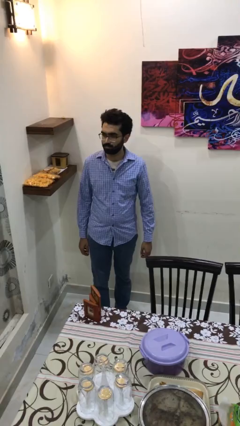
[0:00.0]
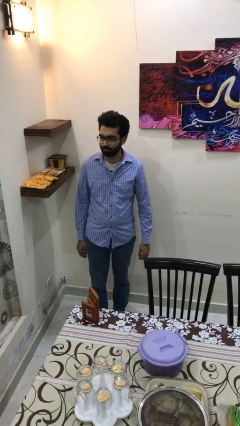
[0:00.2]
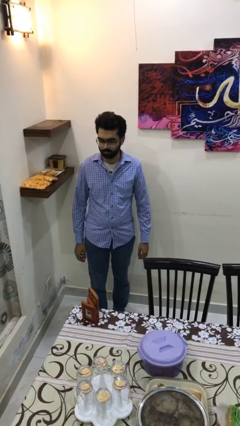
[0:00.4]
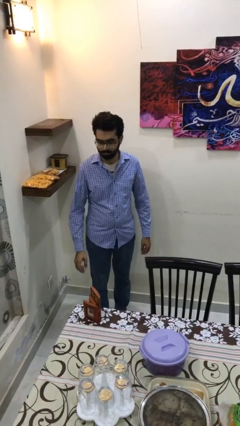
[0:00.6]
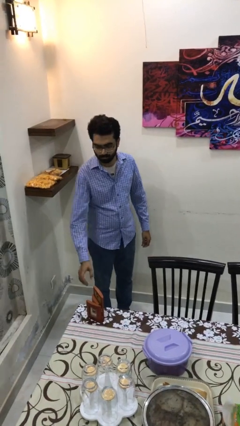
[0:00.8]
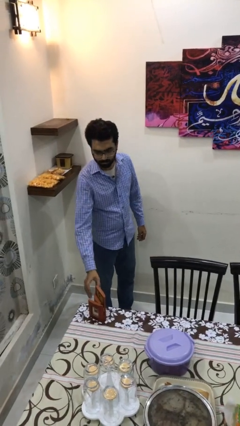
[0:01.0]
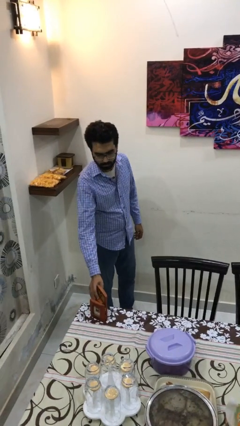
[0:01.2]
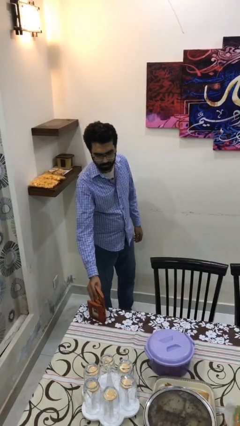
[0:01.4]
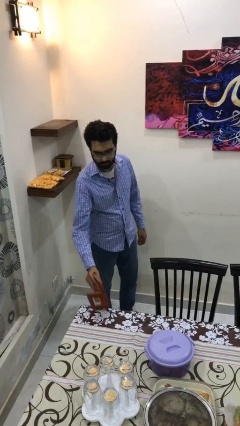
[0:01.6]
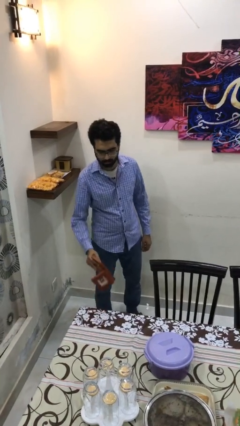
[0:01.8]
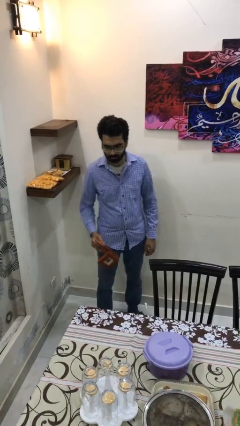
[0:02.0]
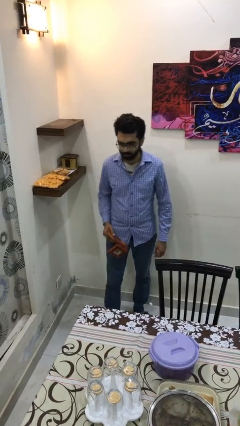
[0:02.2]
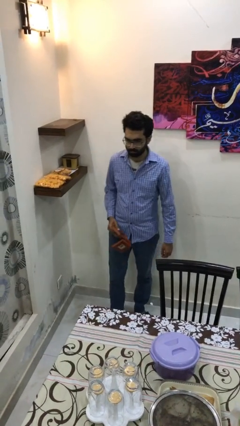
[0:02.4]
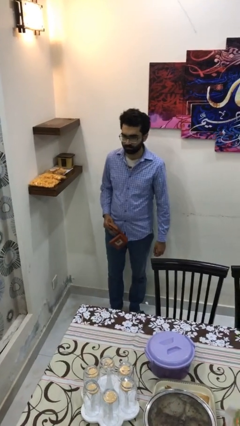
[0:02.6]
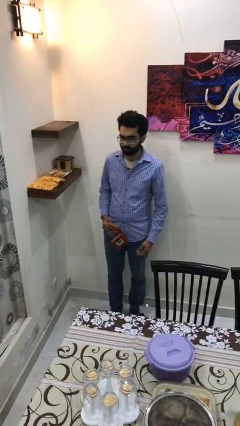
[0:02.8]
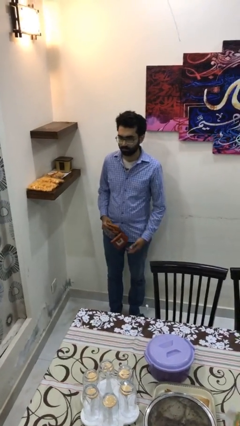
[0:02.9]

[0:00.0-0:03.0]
person picks up object from table

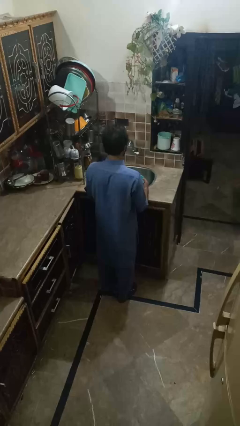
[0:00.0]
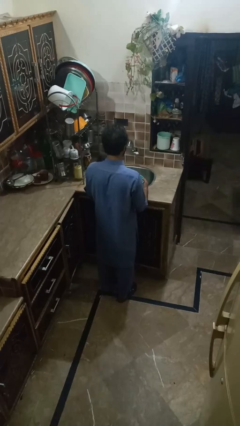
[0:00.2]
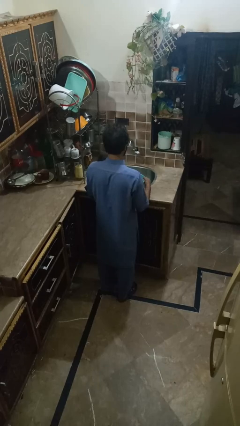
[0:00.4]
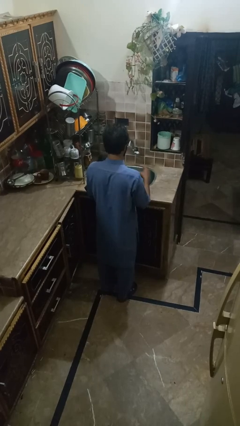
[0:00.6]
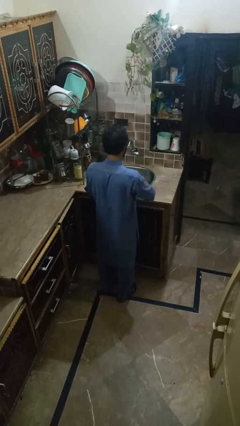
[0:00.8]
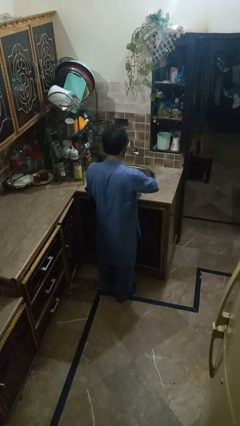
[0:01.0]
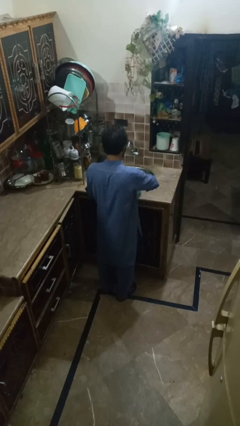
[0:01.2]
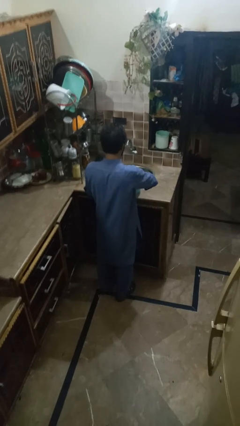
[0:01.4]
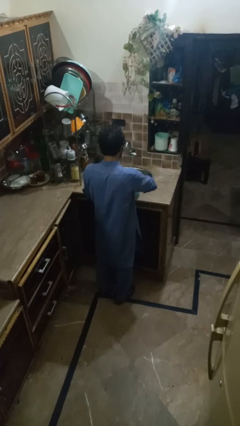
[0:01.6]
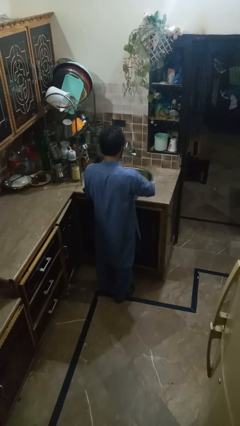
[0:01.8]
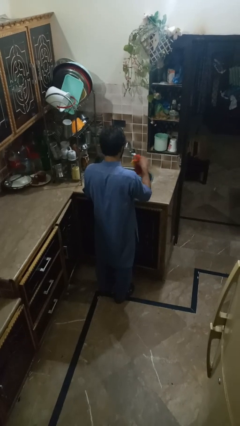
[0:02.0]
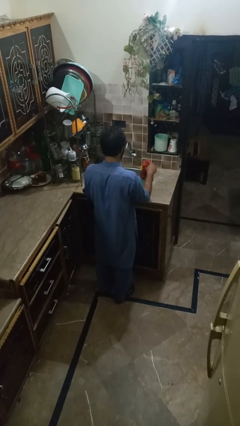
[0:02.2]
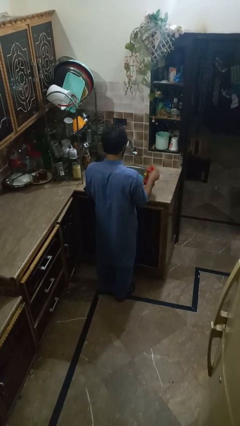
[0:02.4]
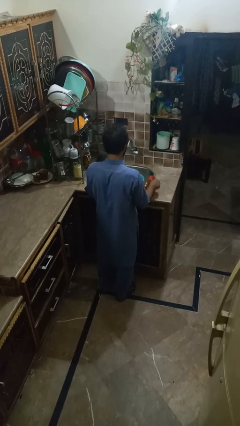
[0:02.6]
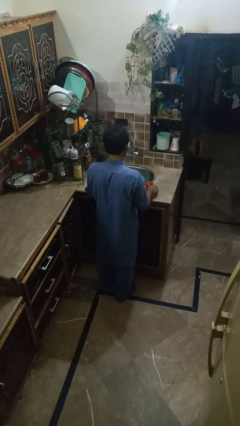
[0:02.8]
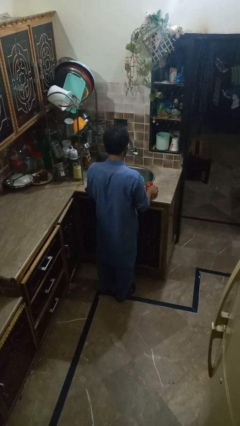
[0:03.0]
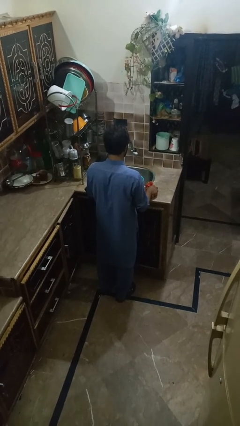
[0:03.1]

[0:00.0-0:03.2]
person pours into bowl

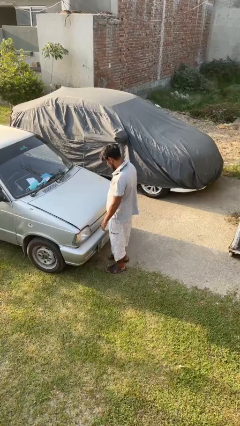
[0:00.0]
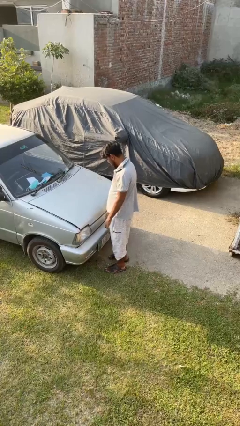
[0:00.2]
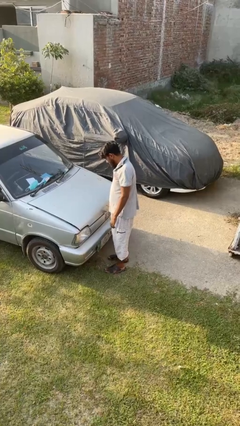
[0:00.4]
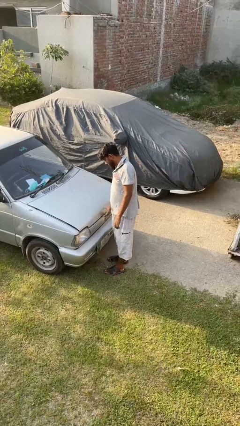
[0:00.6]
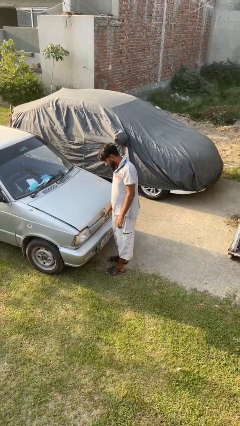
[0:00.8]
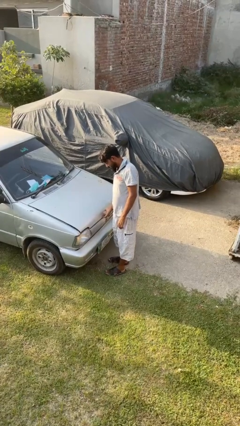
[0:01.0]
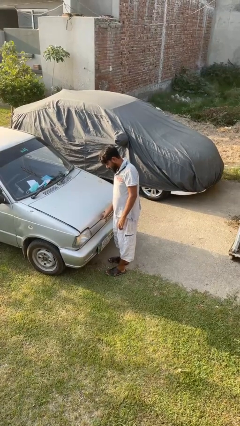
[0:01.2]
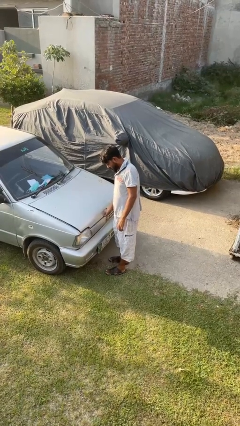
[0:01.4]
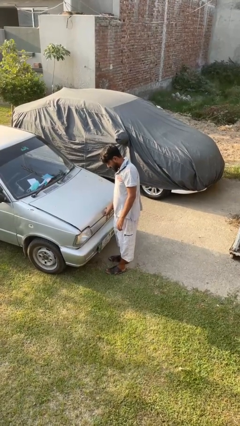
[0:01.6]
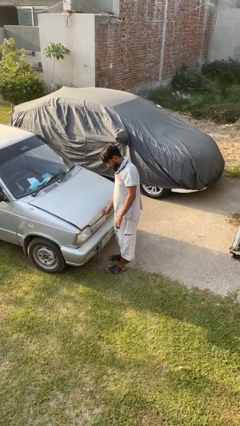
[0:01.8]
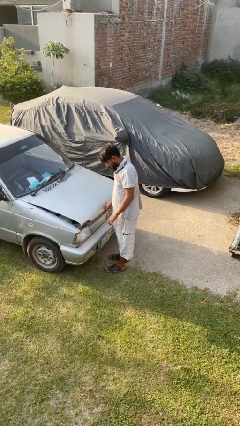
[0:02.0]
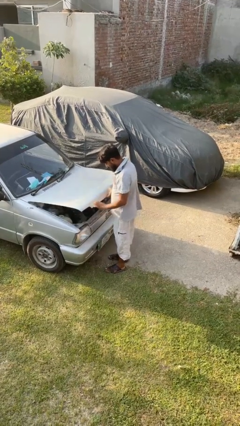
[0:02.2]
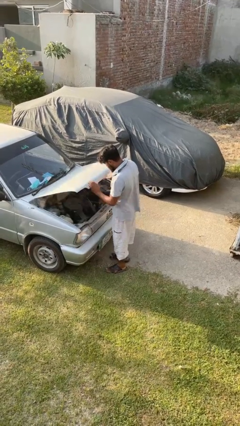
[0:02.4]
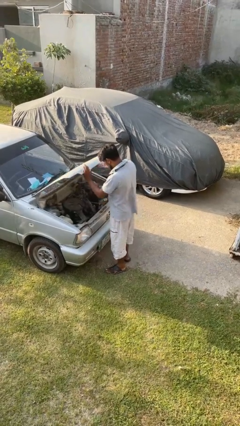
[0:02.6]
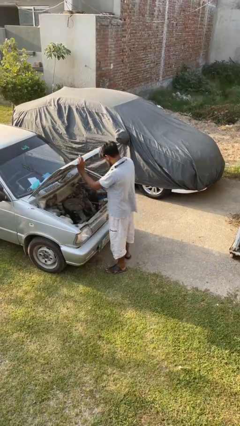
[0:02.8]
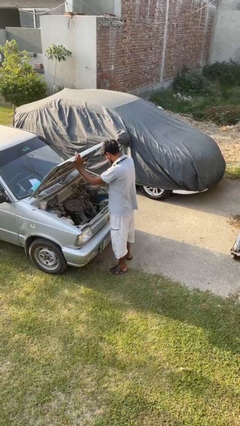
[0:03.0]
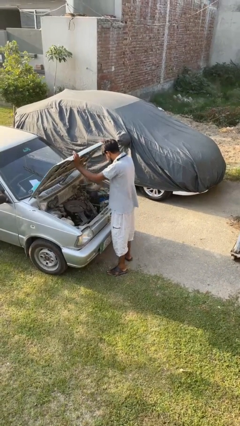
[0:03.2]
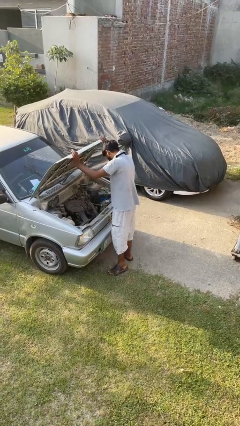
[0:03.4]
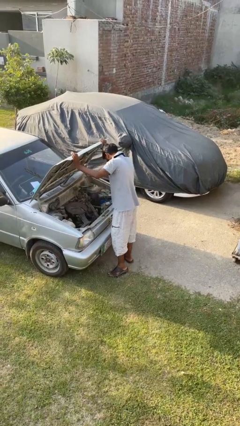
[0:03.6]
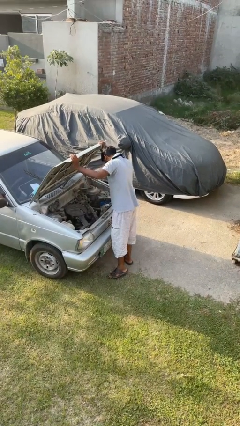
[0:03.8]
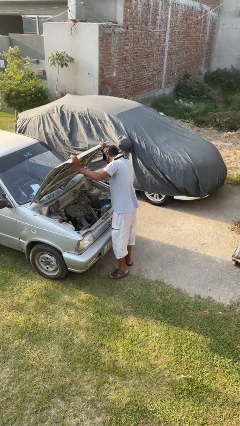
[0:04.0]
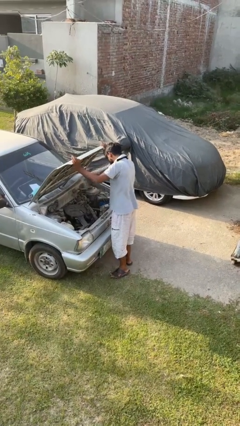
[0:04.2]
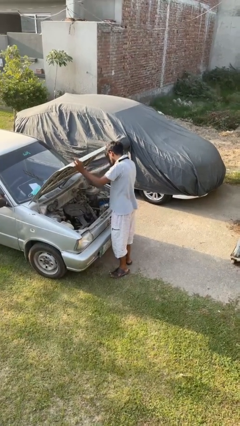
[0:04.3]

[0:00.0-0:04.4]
person opens car hood

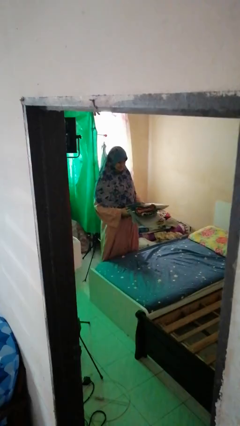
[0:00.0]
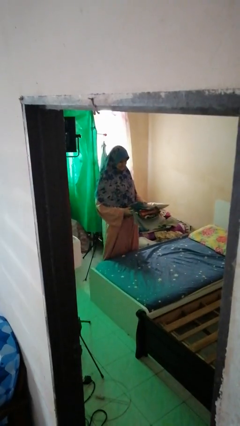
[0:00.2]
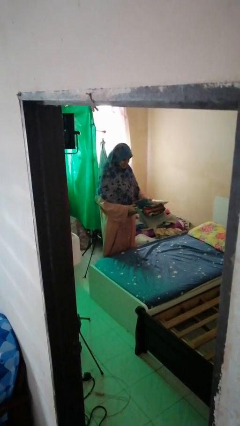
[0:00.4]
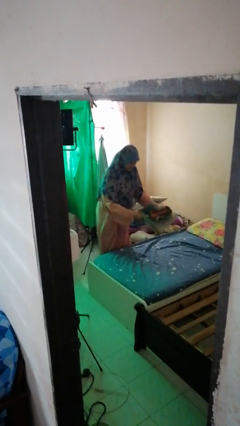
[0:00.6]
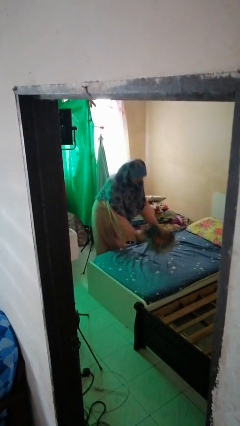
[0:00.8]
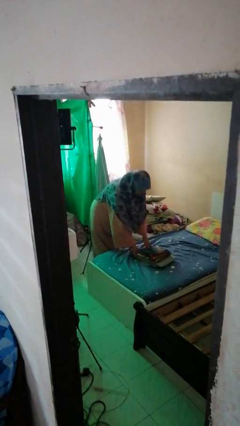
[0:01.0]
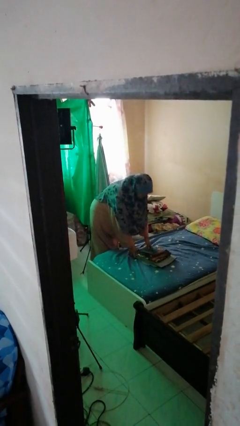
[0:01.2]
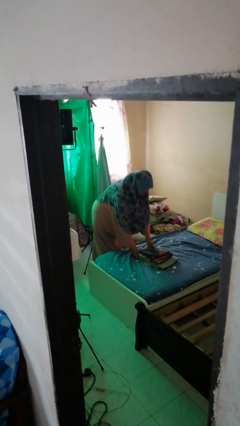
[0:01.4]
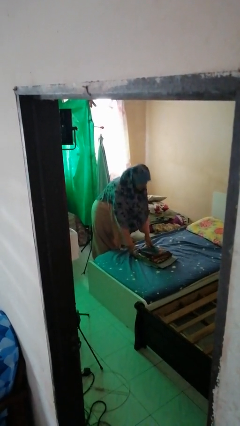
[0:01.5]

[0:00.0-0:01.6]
person puts down object on bed

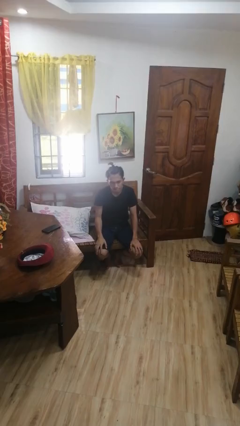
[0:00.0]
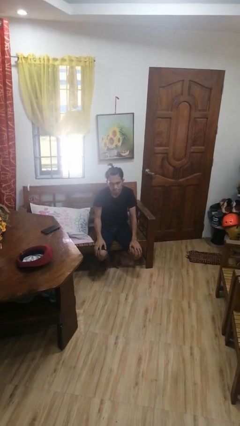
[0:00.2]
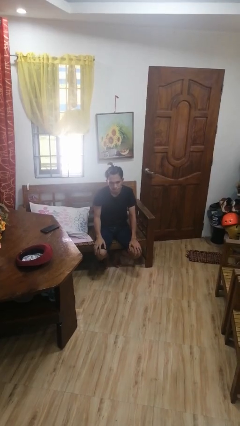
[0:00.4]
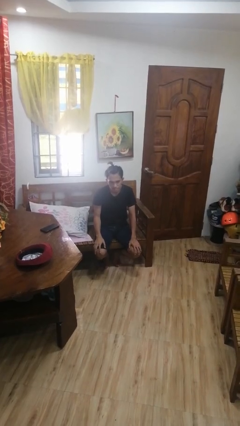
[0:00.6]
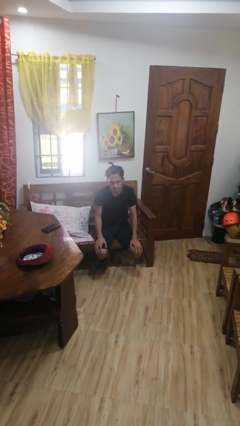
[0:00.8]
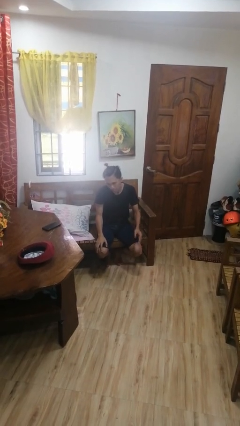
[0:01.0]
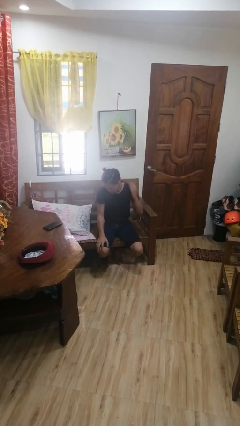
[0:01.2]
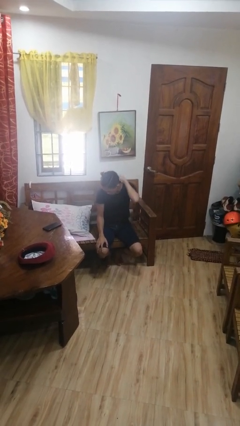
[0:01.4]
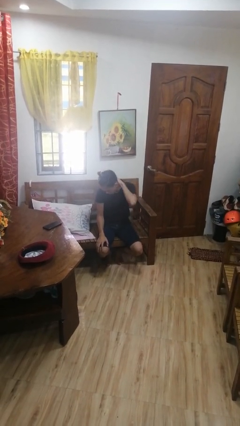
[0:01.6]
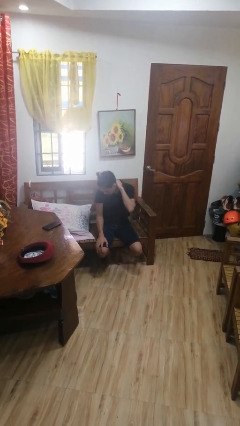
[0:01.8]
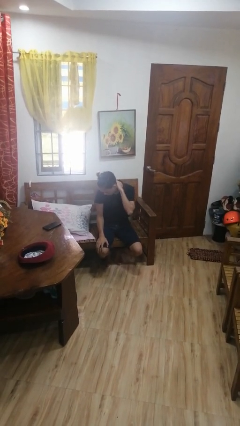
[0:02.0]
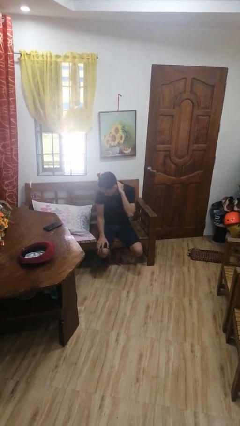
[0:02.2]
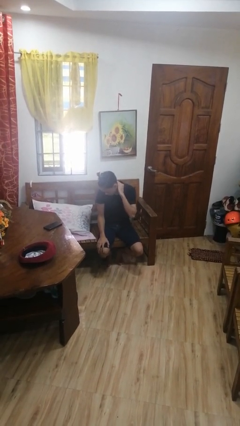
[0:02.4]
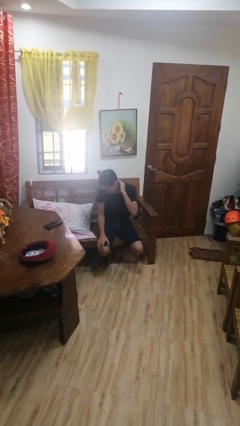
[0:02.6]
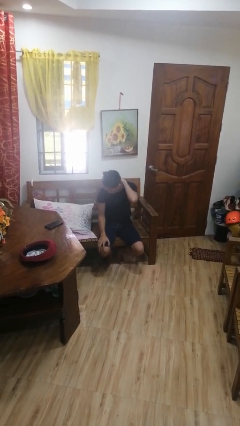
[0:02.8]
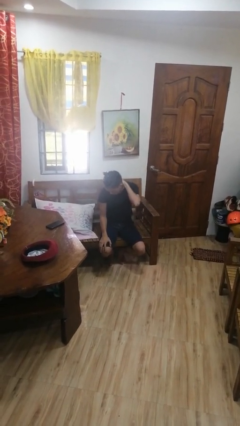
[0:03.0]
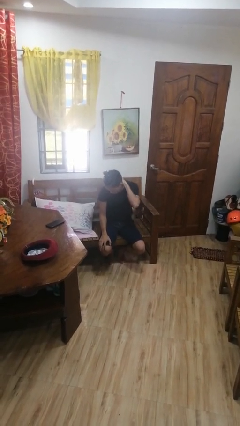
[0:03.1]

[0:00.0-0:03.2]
person rubs neck

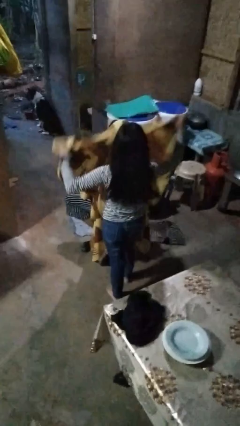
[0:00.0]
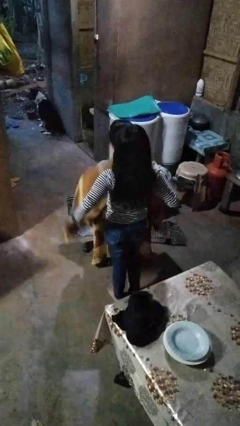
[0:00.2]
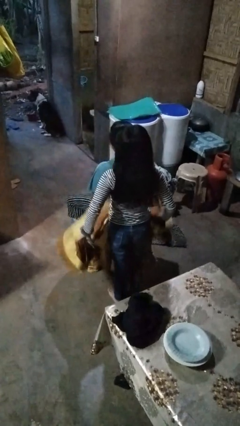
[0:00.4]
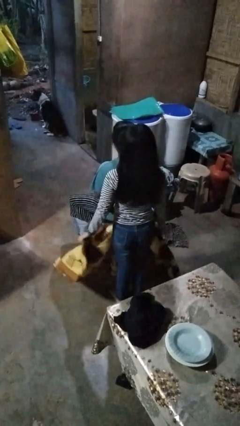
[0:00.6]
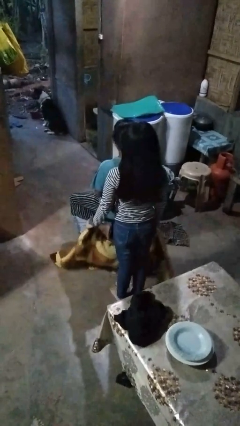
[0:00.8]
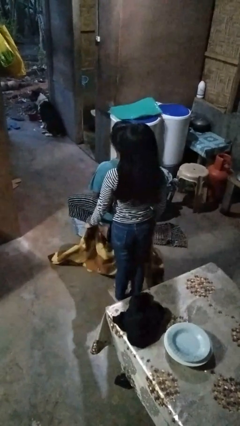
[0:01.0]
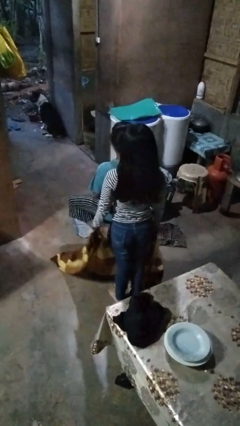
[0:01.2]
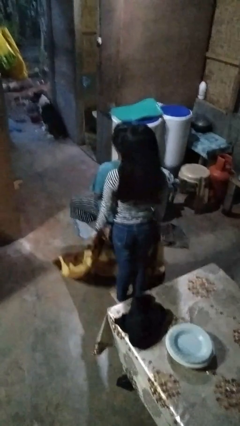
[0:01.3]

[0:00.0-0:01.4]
person uncovers friend with blanket

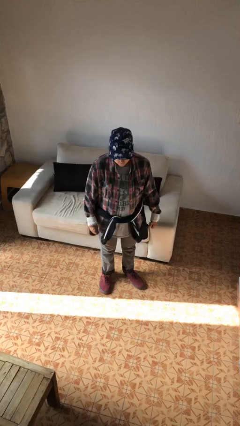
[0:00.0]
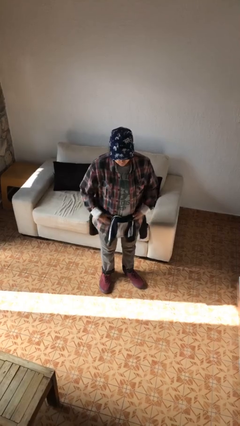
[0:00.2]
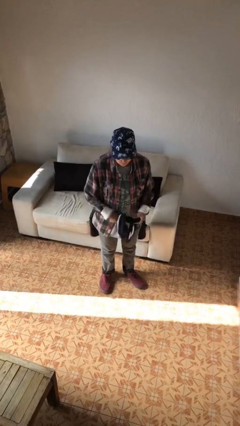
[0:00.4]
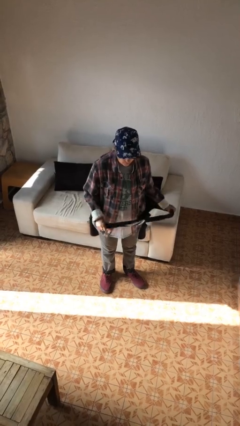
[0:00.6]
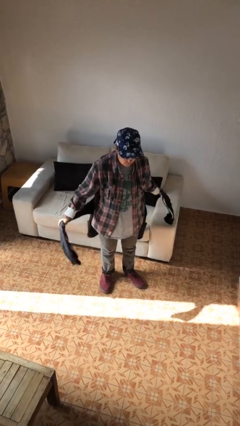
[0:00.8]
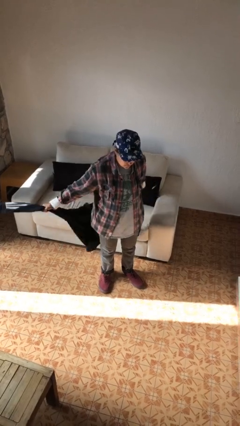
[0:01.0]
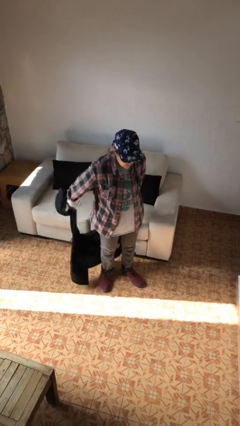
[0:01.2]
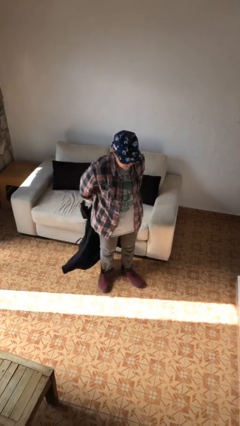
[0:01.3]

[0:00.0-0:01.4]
person unties jacket around waist
